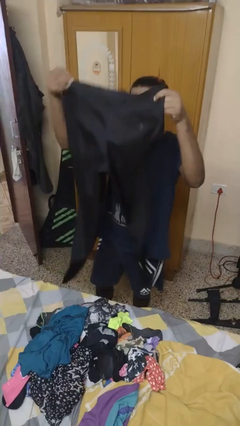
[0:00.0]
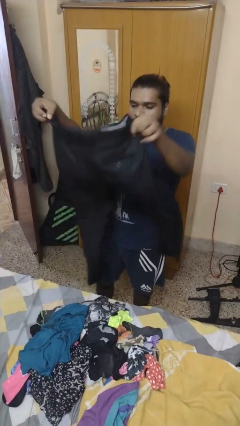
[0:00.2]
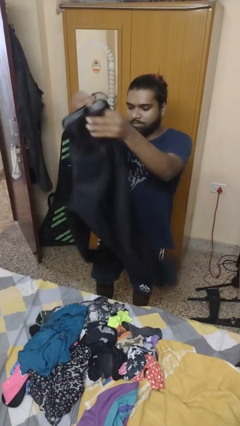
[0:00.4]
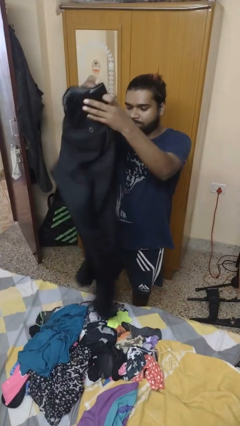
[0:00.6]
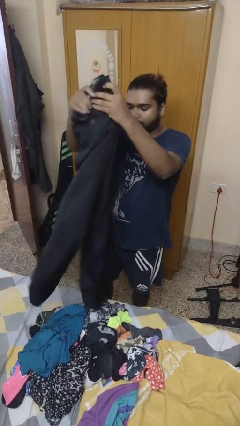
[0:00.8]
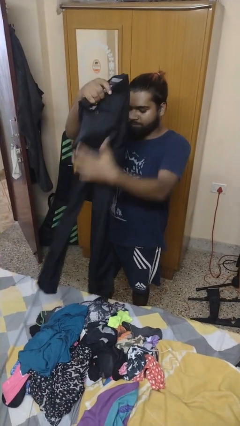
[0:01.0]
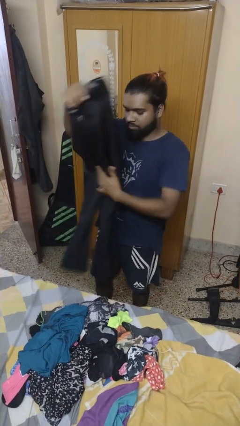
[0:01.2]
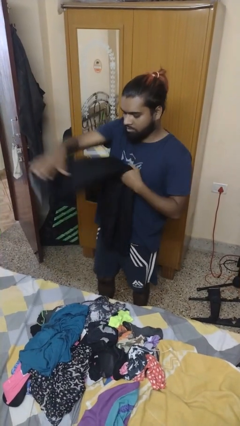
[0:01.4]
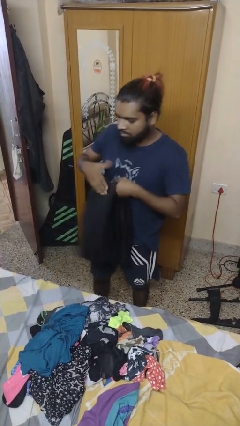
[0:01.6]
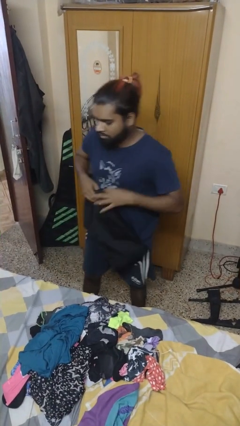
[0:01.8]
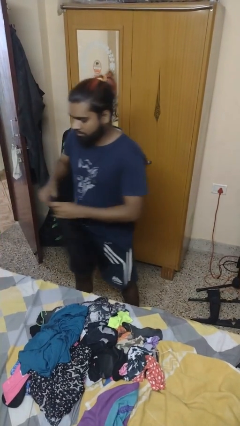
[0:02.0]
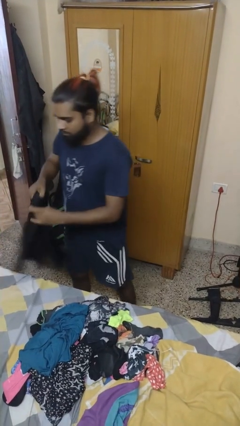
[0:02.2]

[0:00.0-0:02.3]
person folds pants

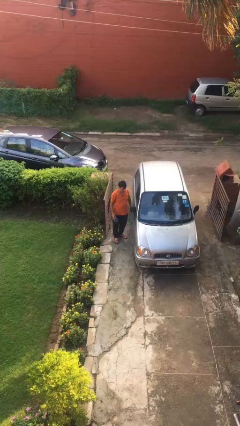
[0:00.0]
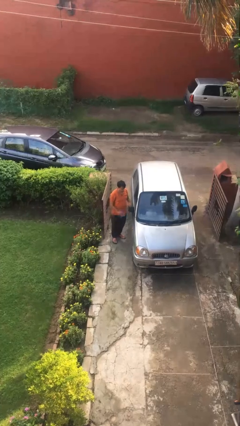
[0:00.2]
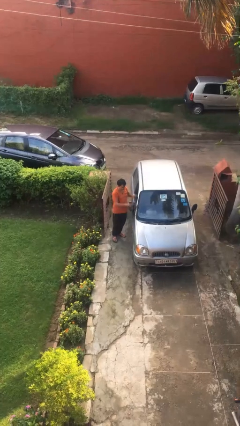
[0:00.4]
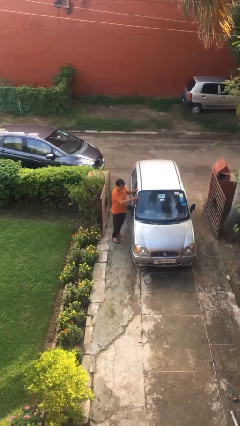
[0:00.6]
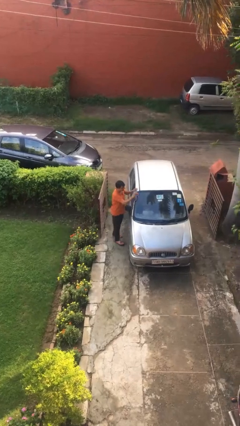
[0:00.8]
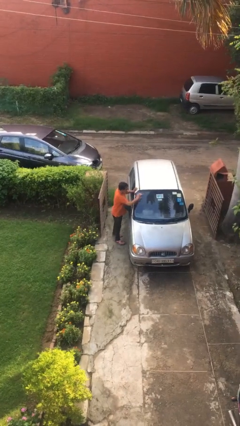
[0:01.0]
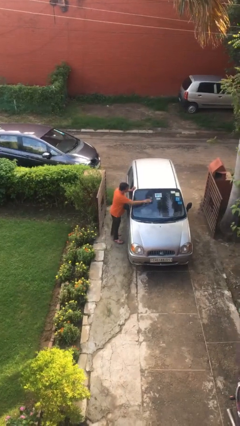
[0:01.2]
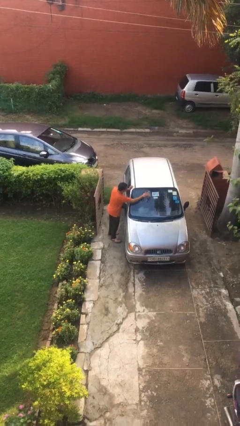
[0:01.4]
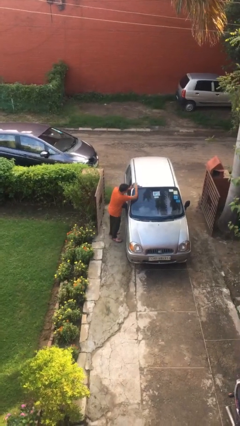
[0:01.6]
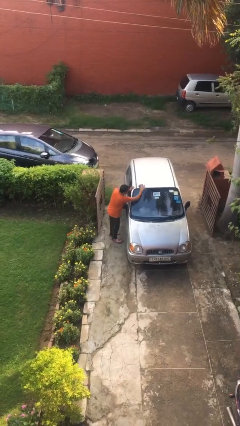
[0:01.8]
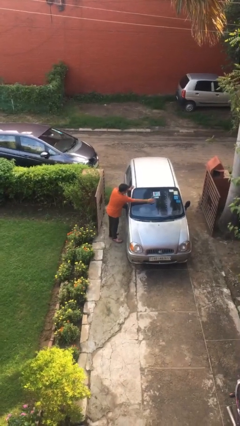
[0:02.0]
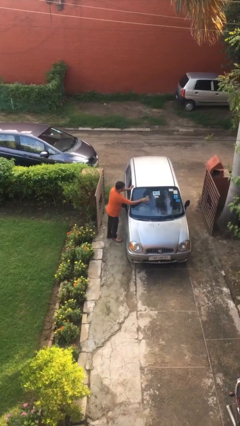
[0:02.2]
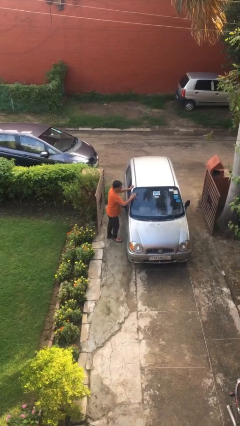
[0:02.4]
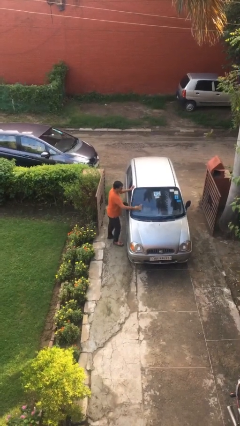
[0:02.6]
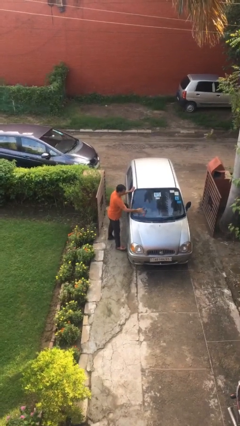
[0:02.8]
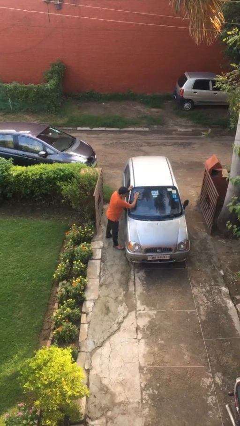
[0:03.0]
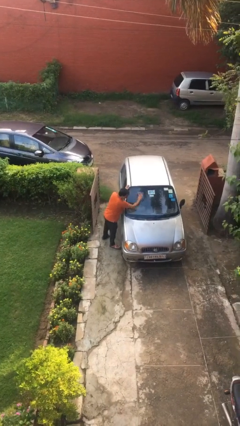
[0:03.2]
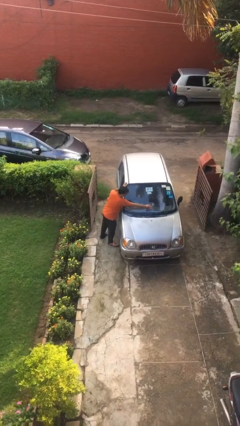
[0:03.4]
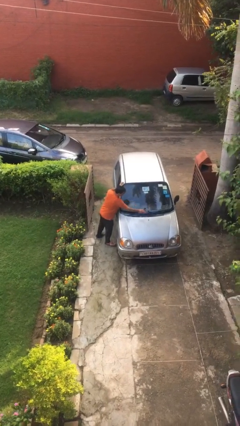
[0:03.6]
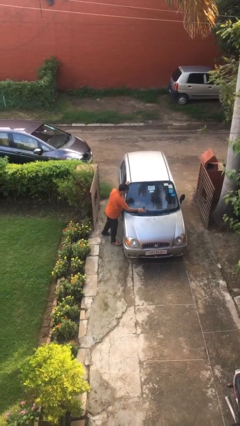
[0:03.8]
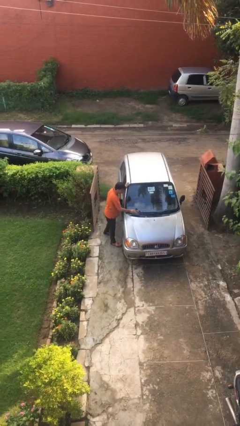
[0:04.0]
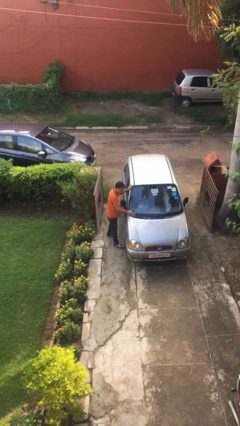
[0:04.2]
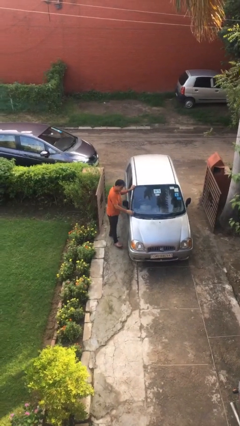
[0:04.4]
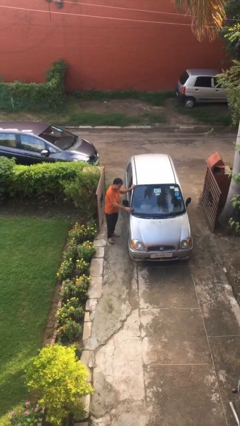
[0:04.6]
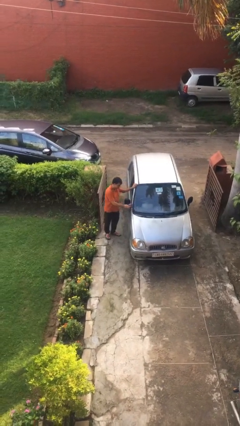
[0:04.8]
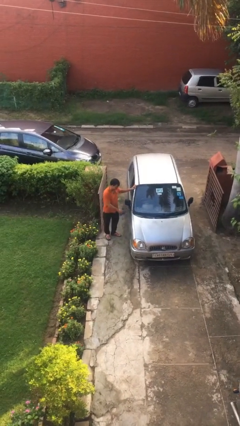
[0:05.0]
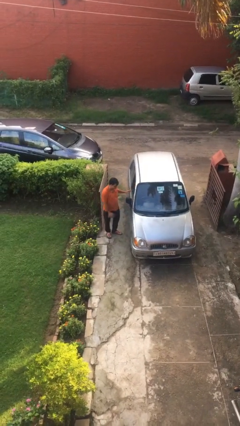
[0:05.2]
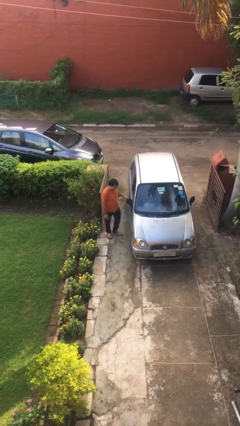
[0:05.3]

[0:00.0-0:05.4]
person polishes car with rag

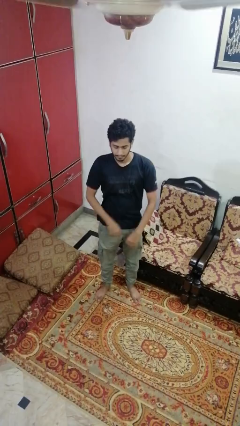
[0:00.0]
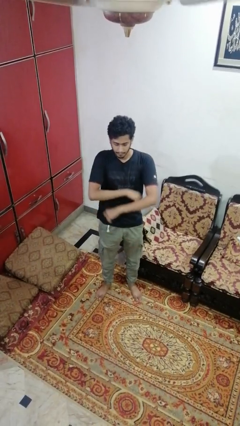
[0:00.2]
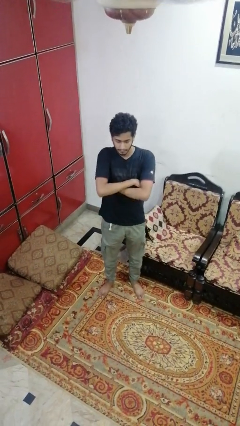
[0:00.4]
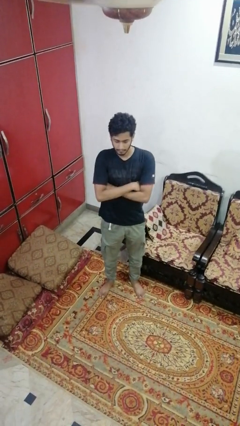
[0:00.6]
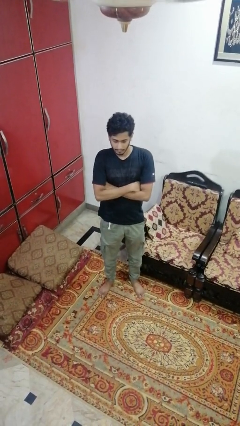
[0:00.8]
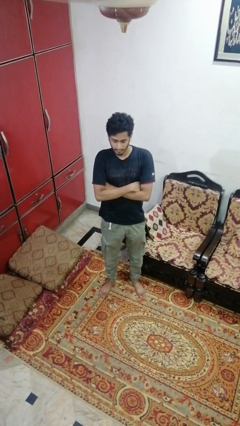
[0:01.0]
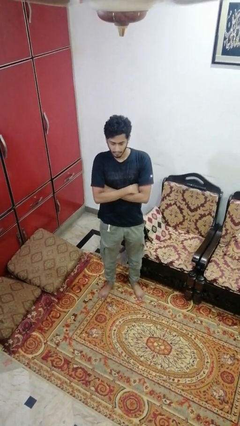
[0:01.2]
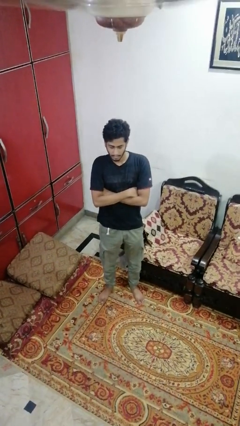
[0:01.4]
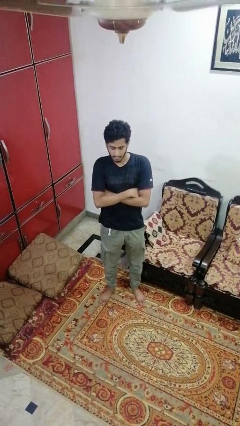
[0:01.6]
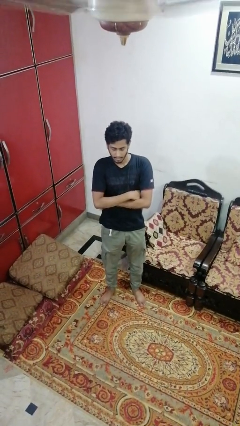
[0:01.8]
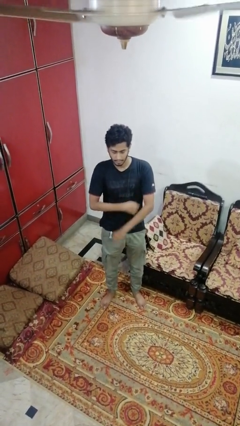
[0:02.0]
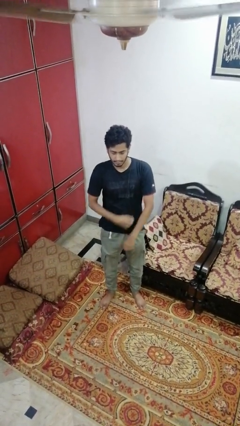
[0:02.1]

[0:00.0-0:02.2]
person crosses arms

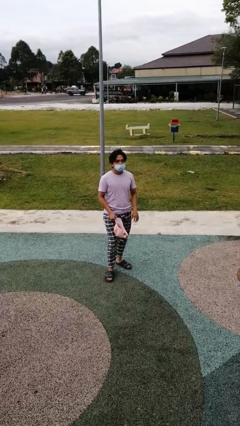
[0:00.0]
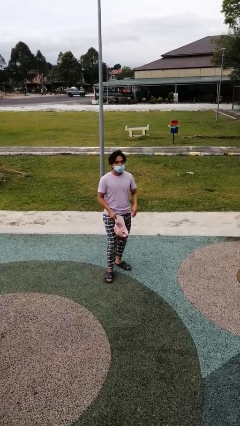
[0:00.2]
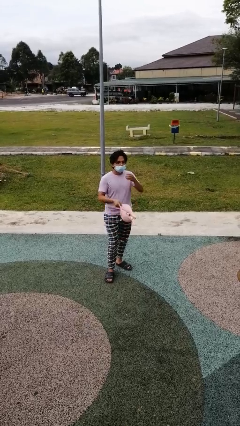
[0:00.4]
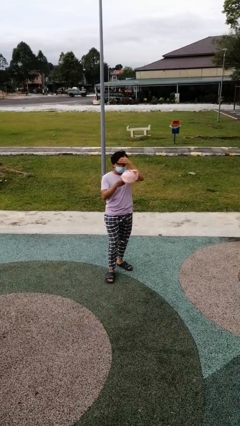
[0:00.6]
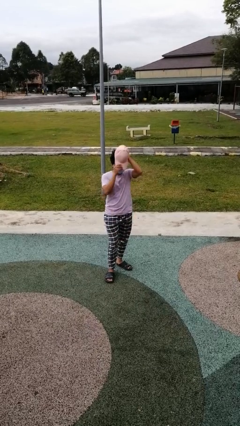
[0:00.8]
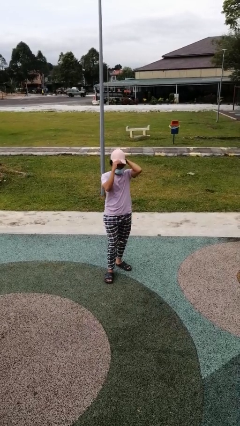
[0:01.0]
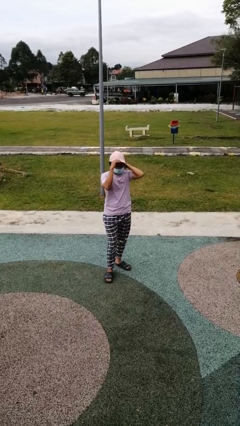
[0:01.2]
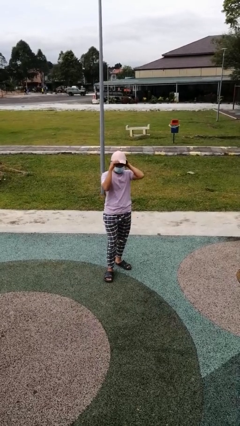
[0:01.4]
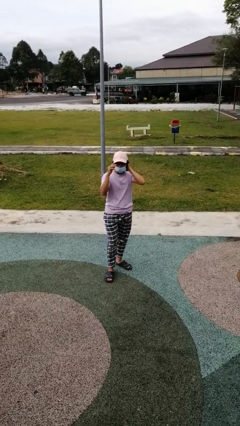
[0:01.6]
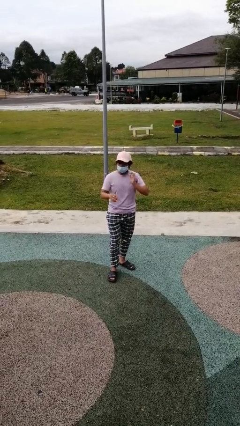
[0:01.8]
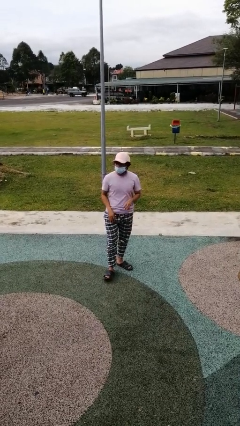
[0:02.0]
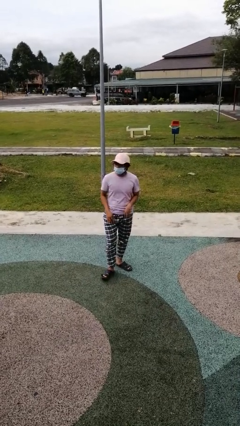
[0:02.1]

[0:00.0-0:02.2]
person puts on hat

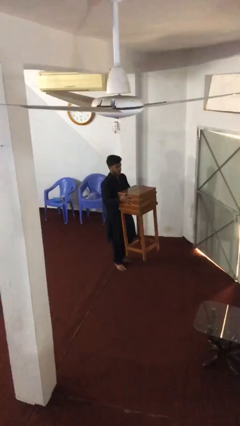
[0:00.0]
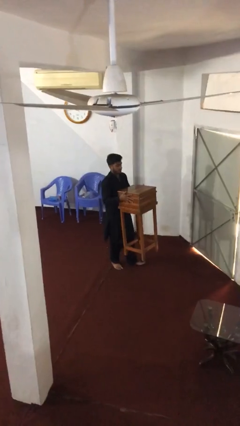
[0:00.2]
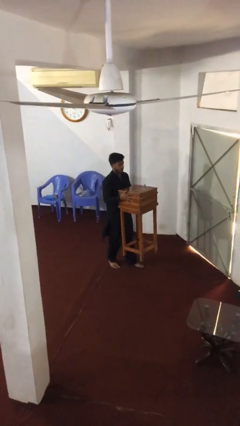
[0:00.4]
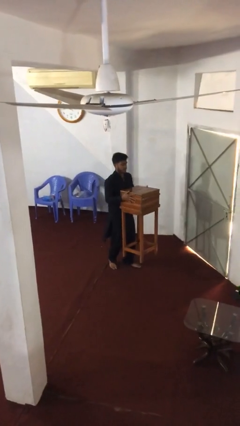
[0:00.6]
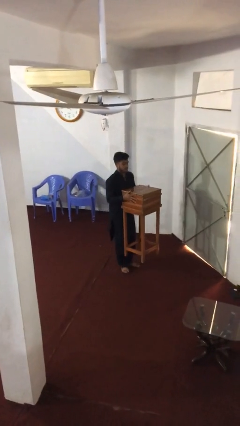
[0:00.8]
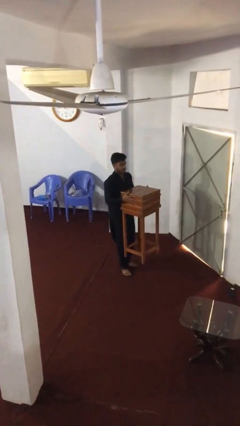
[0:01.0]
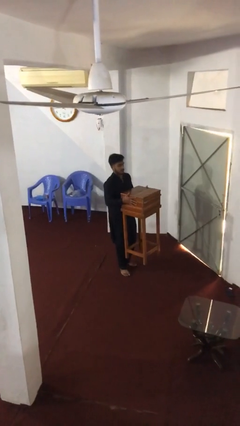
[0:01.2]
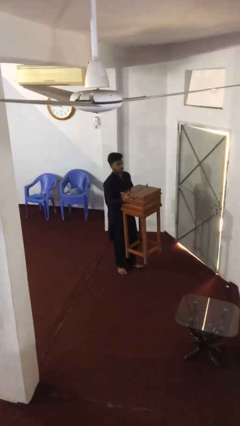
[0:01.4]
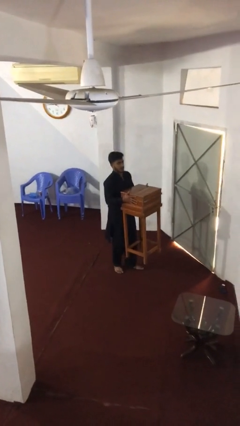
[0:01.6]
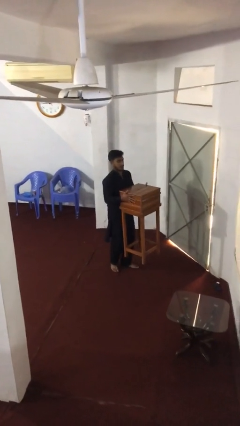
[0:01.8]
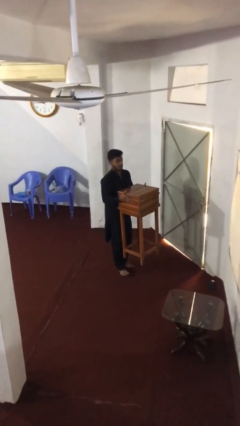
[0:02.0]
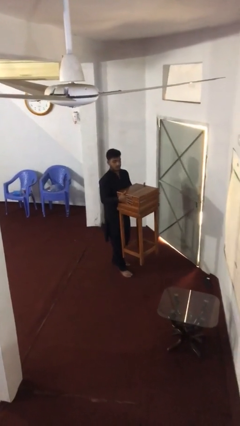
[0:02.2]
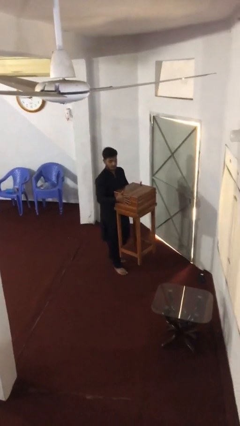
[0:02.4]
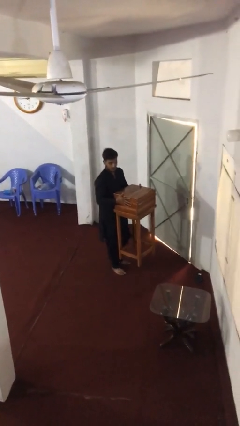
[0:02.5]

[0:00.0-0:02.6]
person carries heavy object

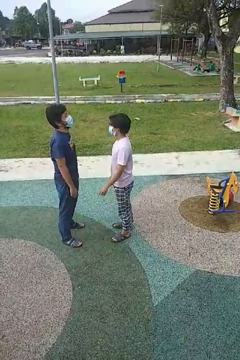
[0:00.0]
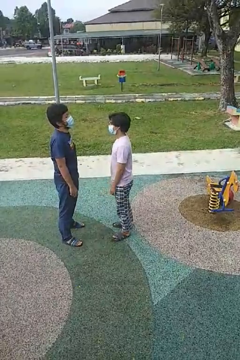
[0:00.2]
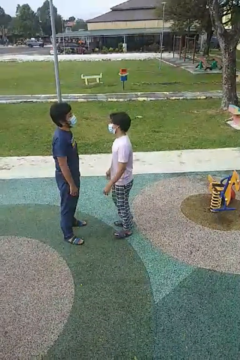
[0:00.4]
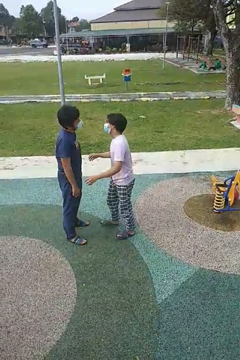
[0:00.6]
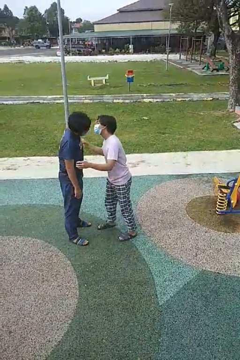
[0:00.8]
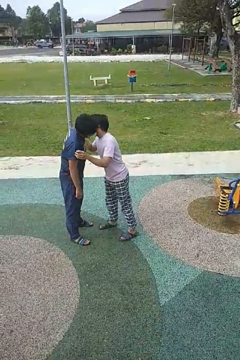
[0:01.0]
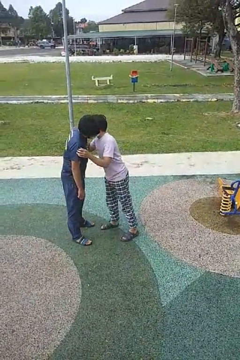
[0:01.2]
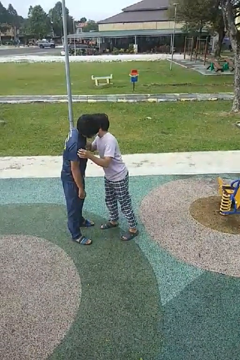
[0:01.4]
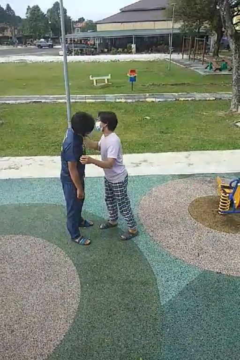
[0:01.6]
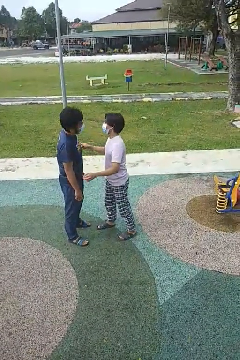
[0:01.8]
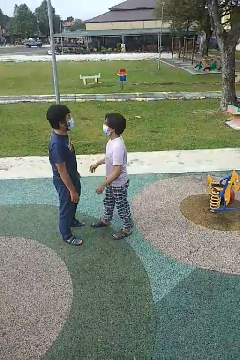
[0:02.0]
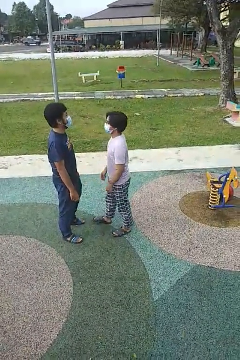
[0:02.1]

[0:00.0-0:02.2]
person kisses cheek of person

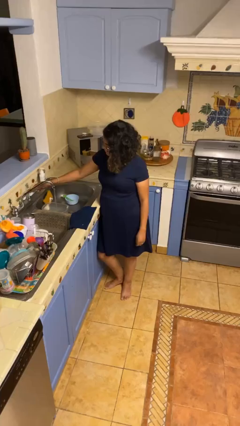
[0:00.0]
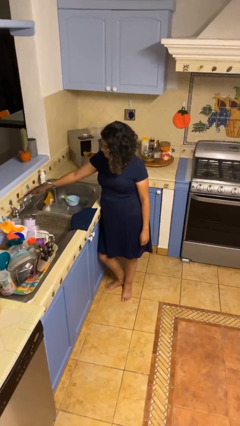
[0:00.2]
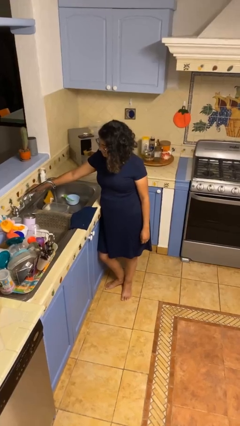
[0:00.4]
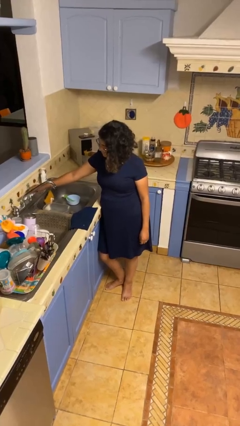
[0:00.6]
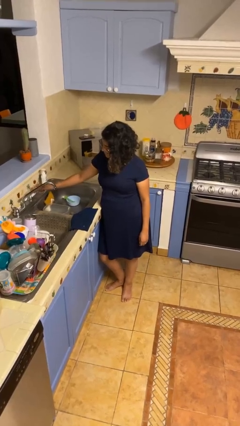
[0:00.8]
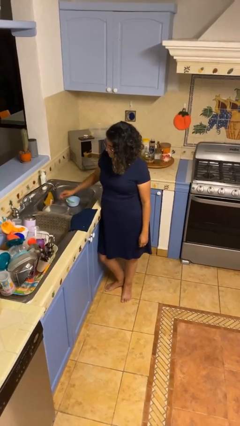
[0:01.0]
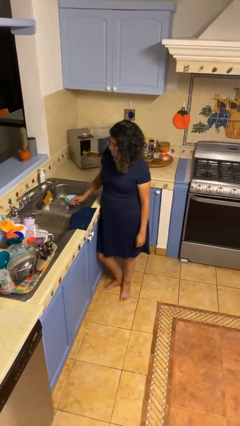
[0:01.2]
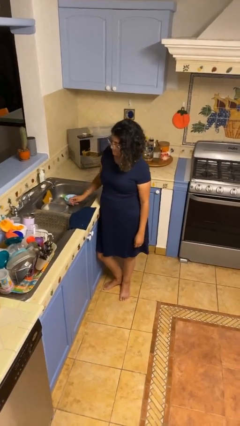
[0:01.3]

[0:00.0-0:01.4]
person turns off faucet
